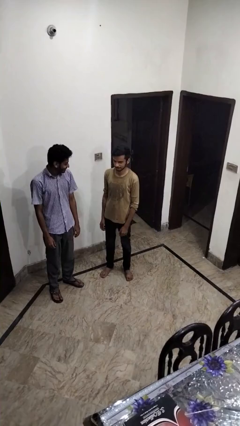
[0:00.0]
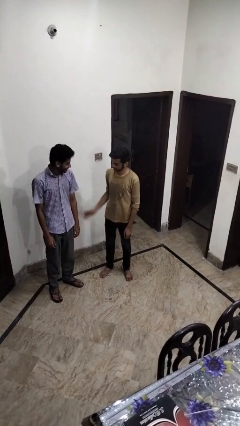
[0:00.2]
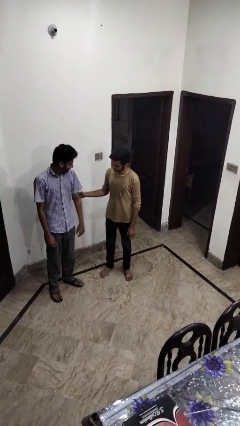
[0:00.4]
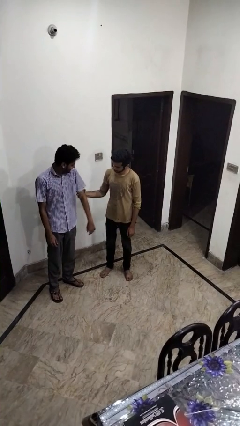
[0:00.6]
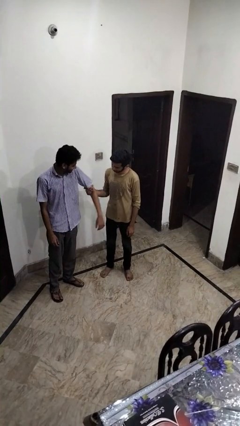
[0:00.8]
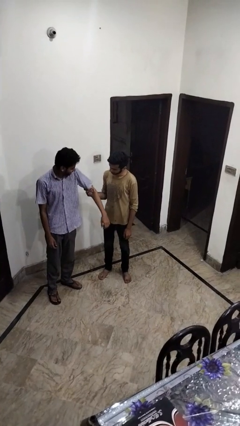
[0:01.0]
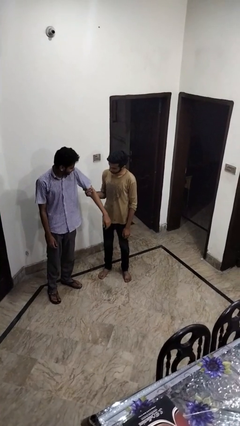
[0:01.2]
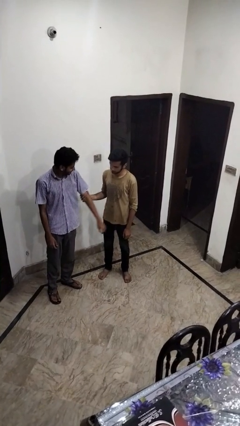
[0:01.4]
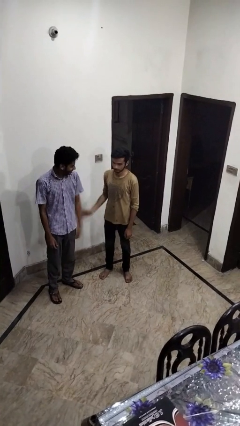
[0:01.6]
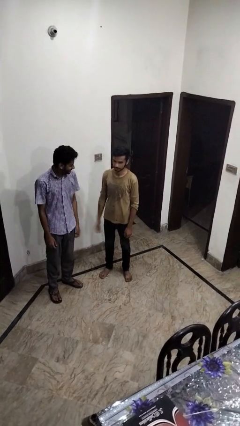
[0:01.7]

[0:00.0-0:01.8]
person grabs person by bicep

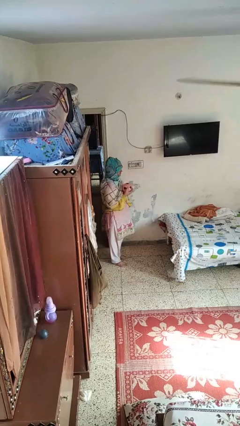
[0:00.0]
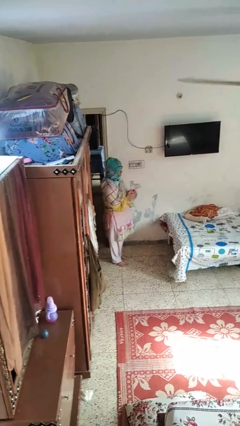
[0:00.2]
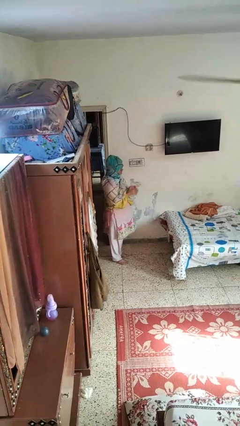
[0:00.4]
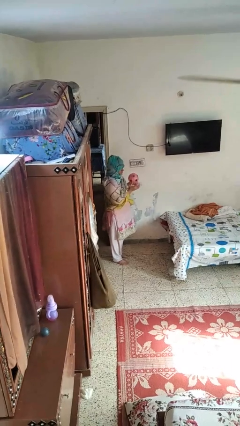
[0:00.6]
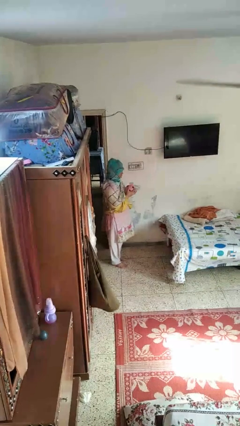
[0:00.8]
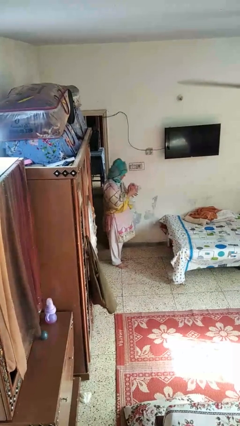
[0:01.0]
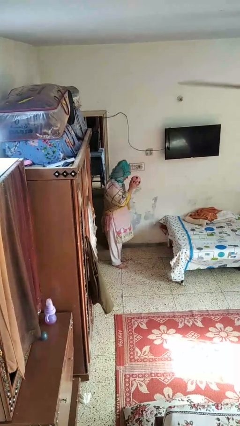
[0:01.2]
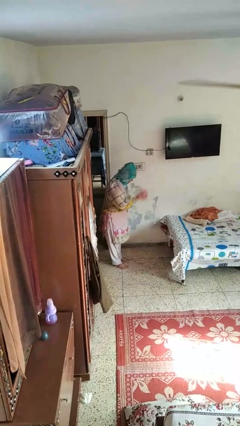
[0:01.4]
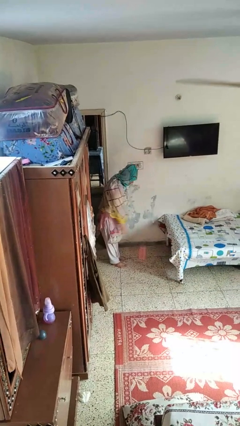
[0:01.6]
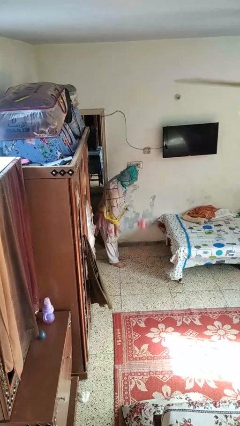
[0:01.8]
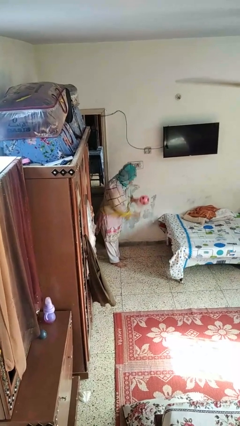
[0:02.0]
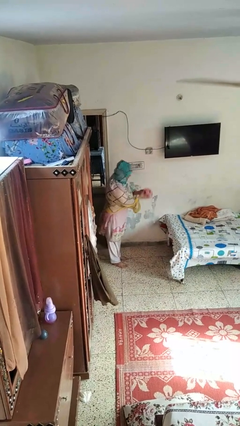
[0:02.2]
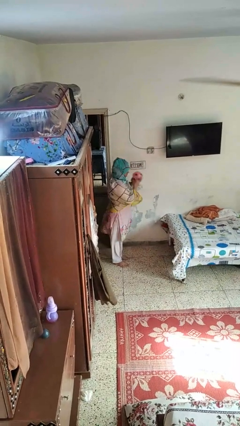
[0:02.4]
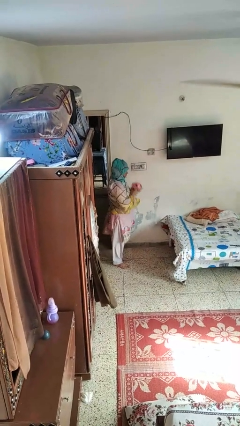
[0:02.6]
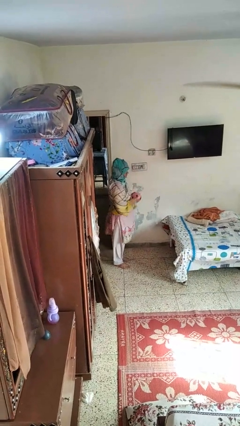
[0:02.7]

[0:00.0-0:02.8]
person bounces ball on floor

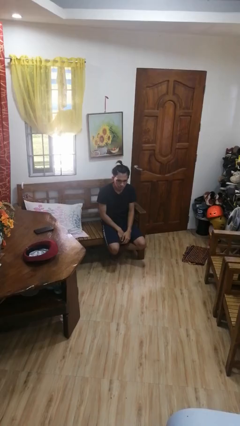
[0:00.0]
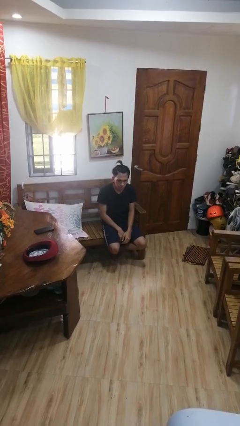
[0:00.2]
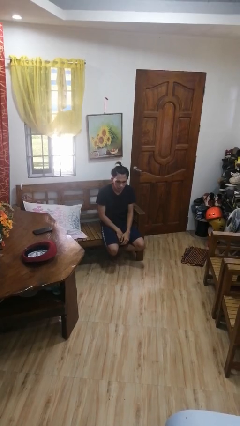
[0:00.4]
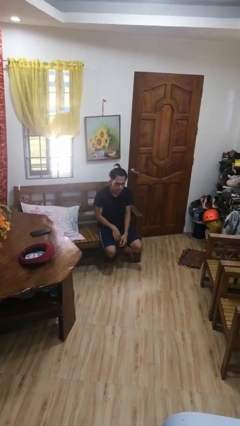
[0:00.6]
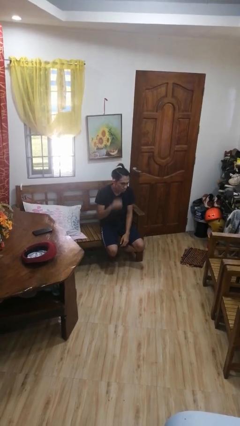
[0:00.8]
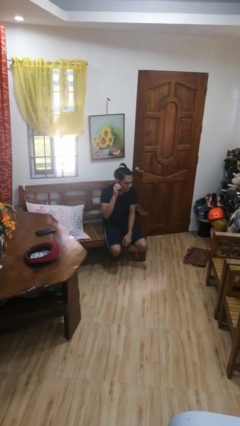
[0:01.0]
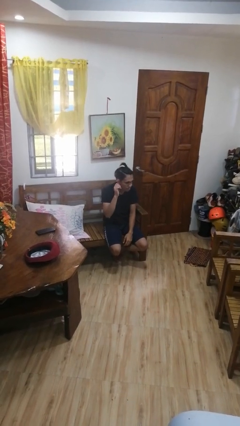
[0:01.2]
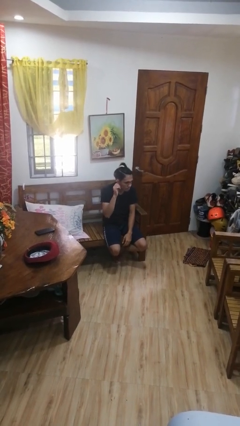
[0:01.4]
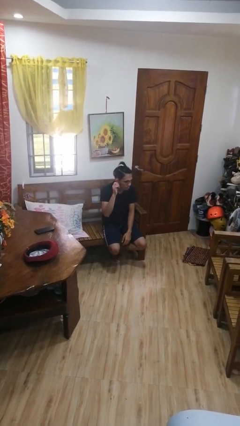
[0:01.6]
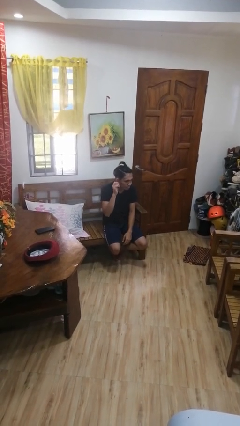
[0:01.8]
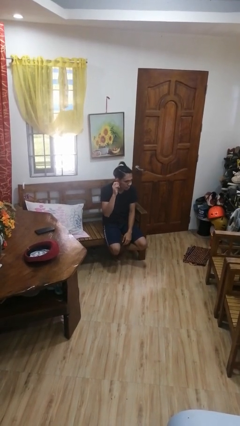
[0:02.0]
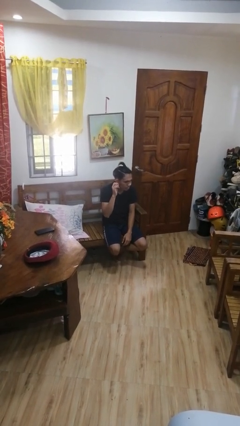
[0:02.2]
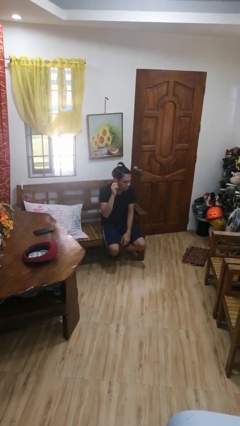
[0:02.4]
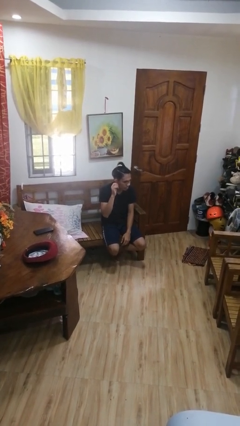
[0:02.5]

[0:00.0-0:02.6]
person touches earlobe

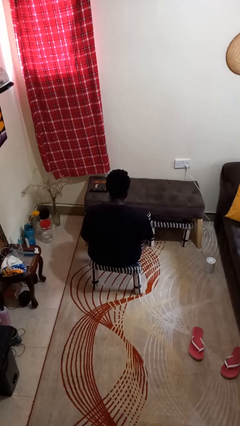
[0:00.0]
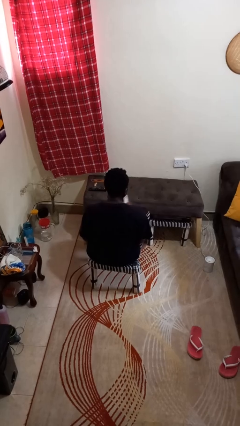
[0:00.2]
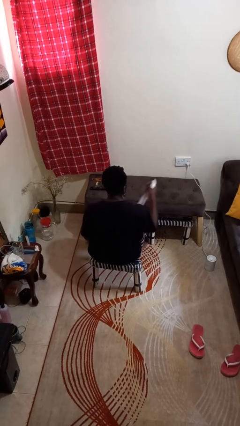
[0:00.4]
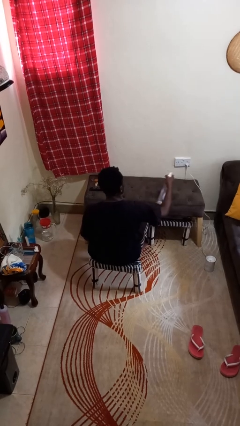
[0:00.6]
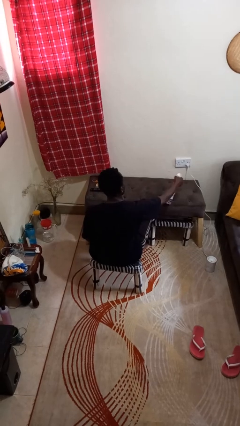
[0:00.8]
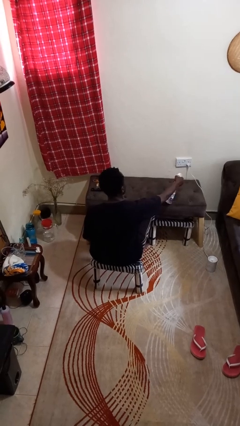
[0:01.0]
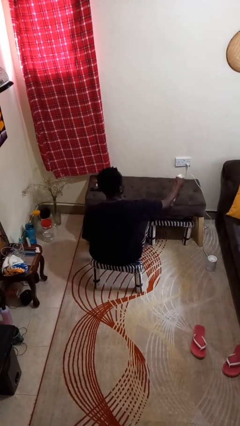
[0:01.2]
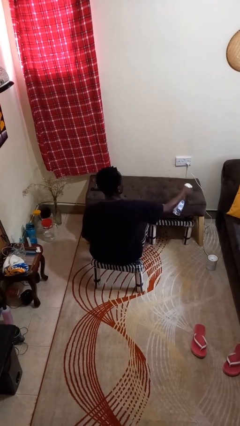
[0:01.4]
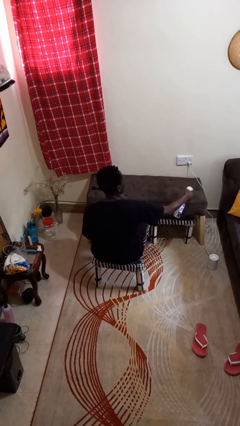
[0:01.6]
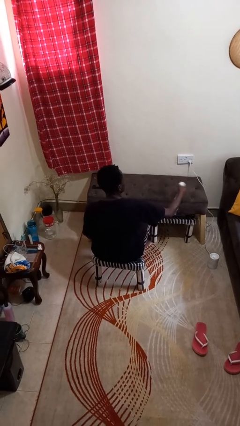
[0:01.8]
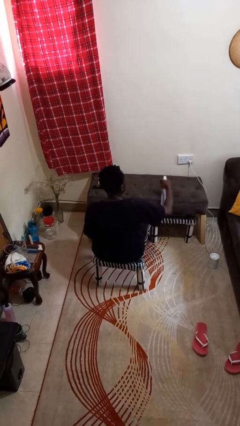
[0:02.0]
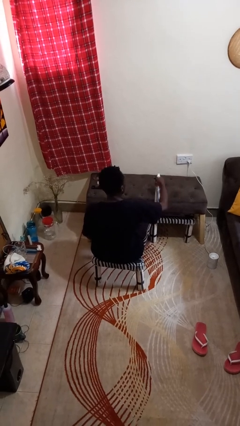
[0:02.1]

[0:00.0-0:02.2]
person sprays from bottle

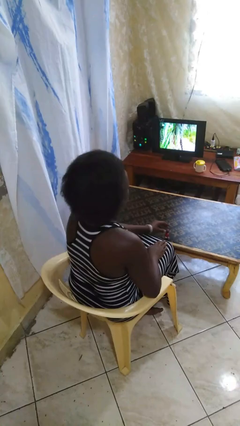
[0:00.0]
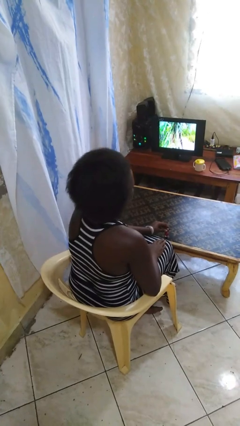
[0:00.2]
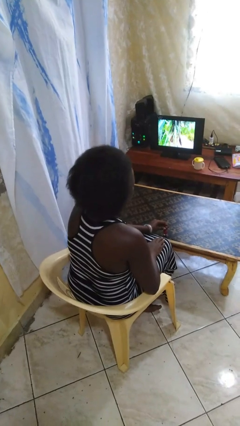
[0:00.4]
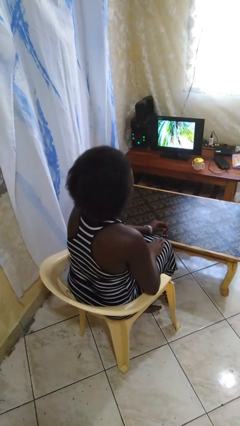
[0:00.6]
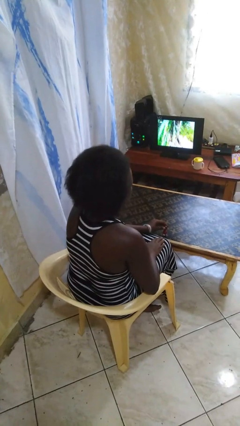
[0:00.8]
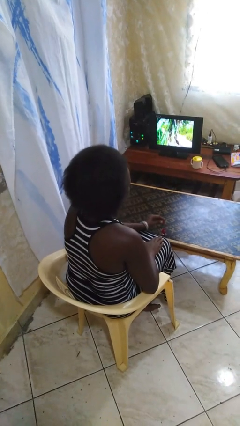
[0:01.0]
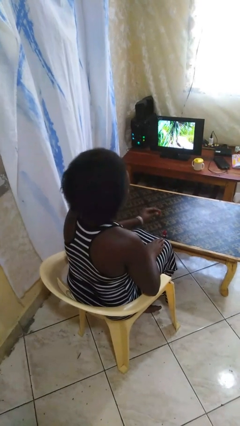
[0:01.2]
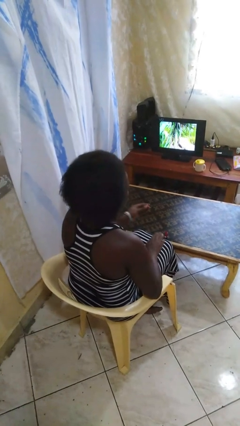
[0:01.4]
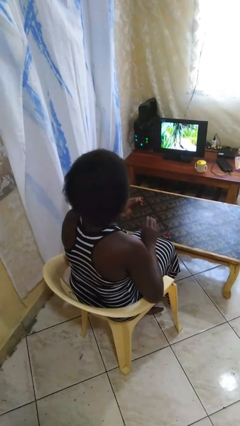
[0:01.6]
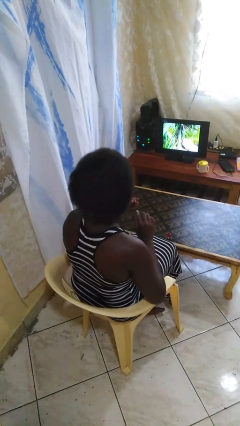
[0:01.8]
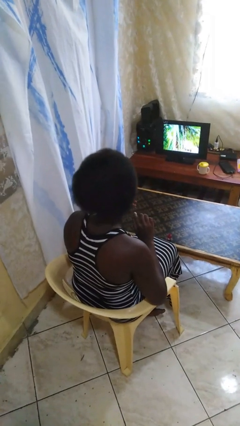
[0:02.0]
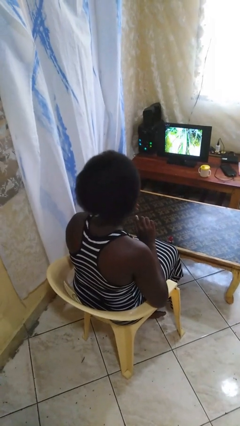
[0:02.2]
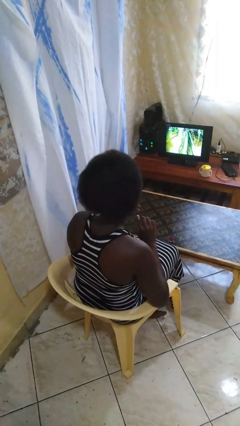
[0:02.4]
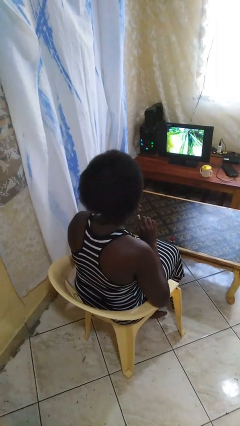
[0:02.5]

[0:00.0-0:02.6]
person paints fingernails

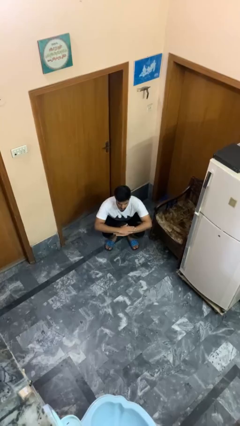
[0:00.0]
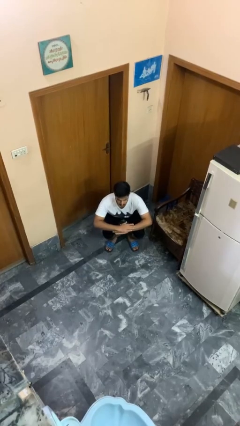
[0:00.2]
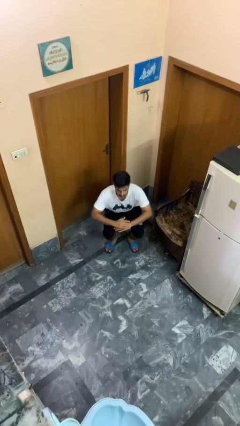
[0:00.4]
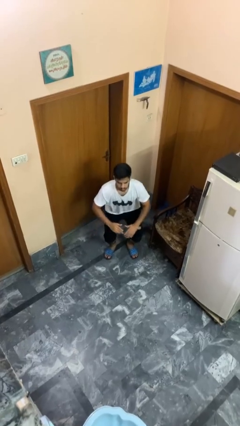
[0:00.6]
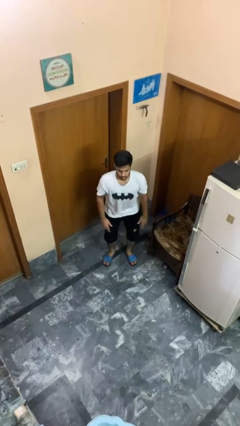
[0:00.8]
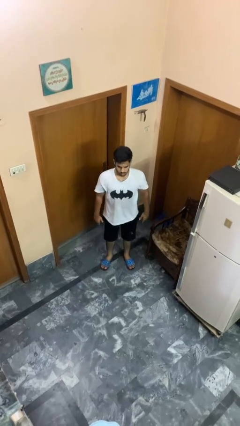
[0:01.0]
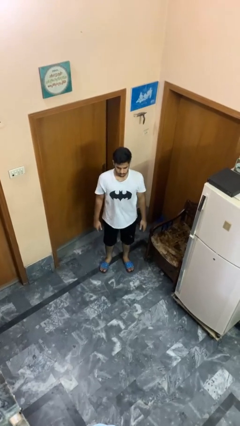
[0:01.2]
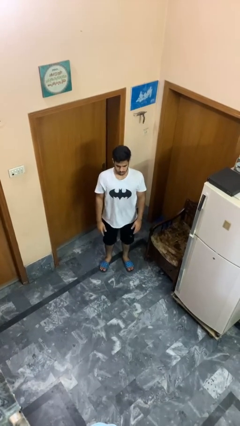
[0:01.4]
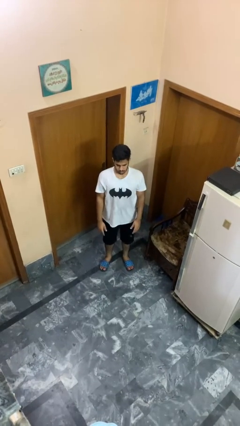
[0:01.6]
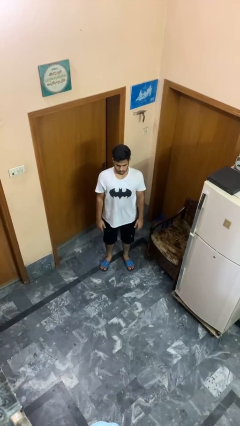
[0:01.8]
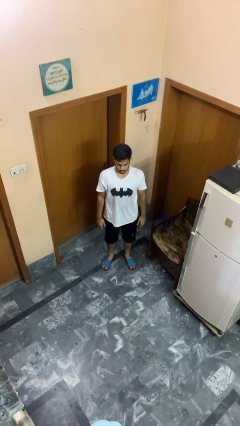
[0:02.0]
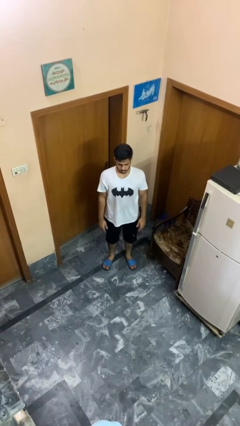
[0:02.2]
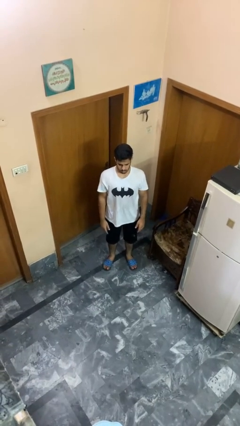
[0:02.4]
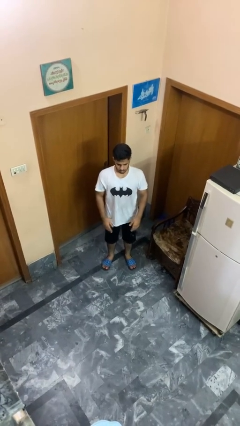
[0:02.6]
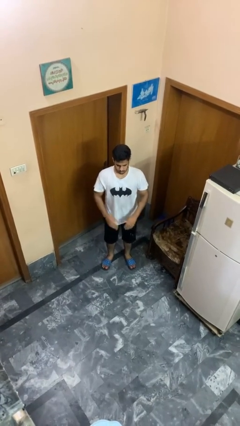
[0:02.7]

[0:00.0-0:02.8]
person stands up

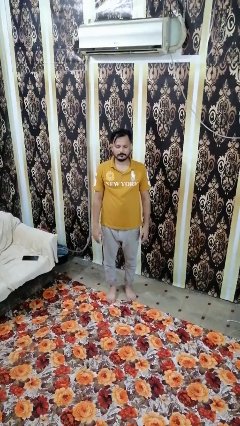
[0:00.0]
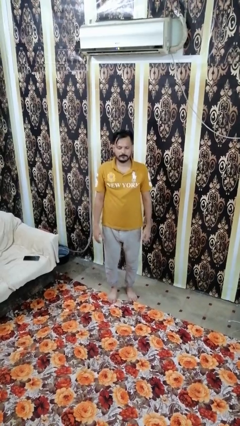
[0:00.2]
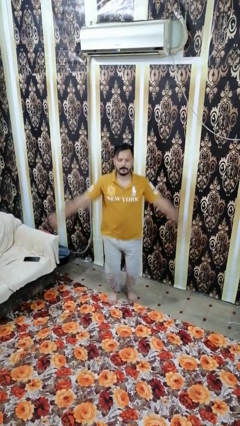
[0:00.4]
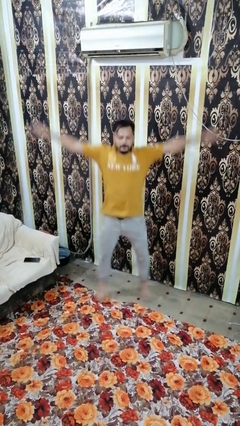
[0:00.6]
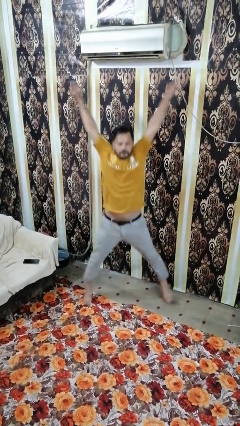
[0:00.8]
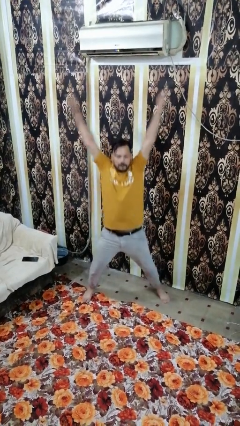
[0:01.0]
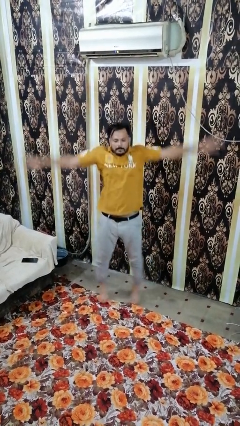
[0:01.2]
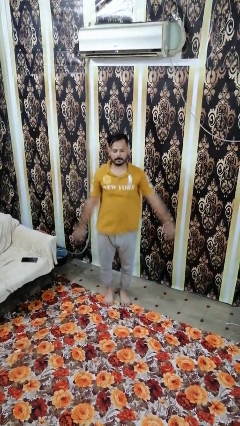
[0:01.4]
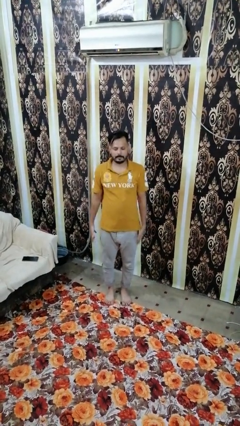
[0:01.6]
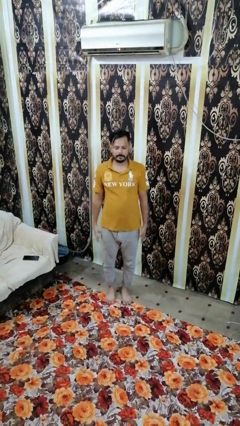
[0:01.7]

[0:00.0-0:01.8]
person exercises with jumping jacks

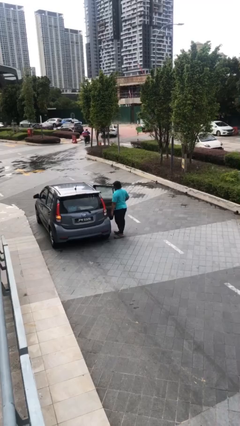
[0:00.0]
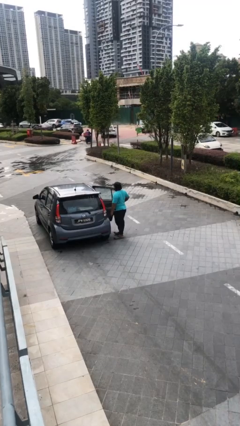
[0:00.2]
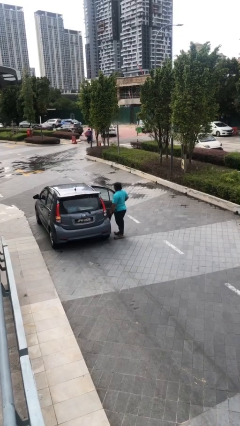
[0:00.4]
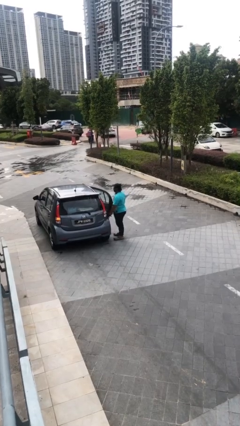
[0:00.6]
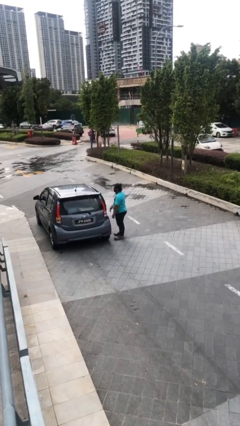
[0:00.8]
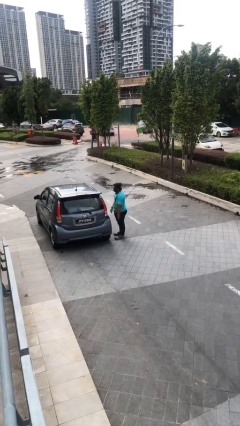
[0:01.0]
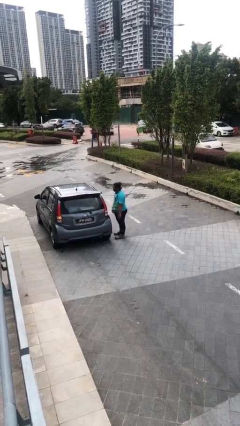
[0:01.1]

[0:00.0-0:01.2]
person closes car door
